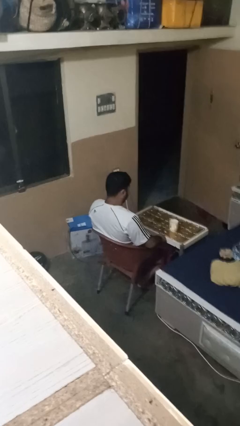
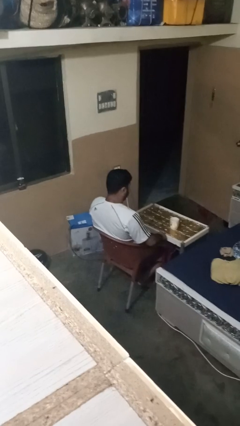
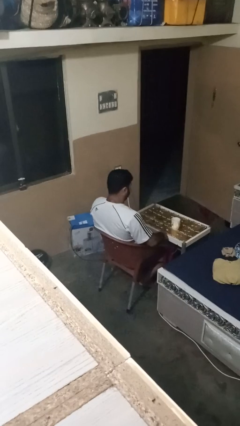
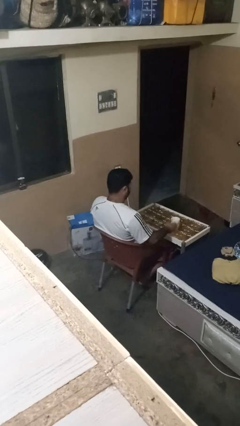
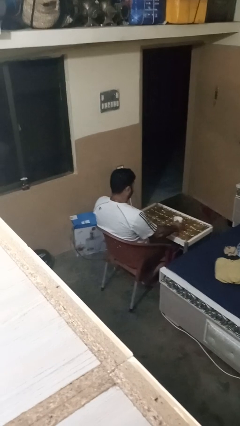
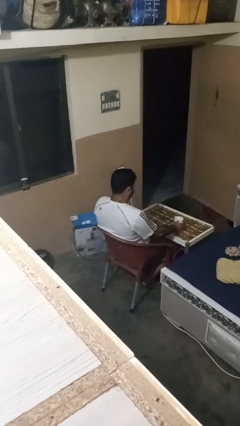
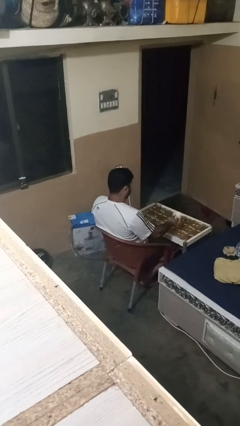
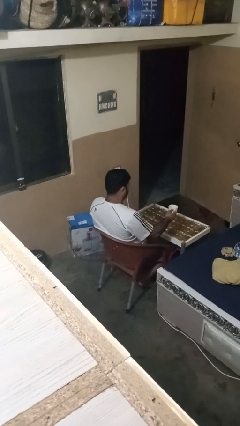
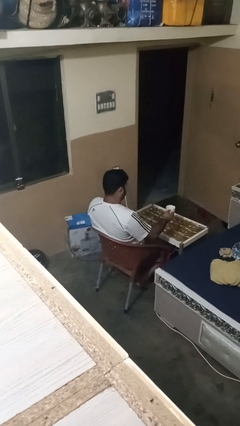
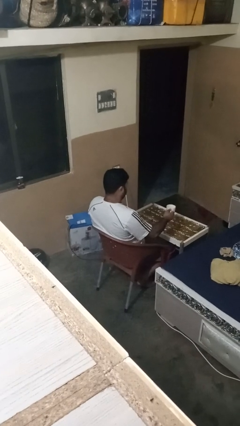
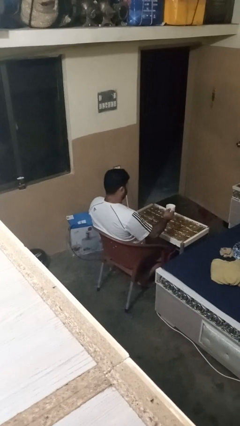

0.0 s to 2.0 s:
person picks up object from table

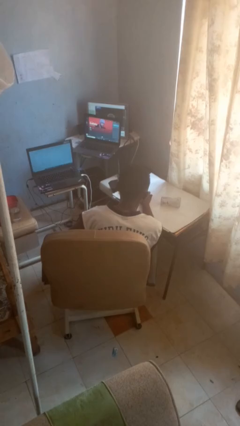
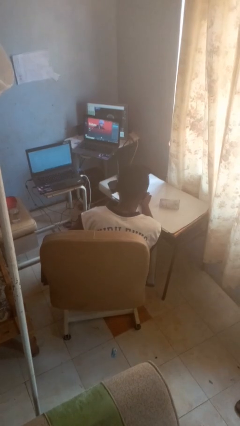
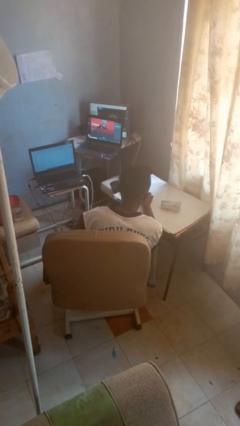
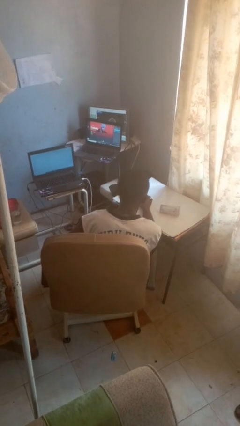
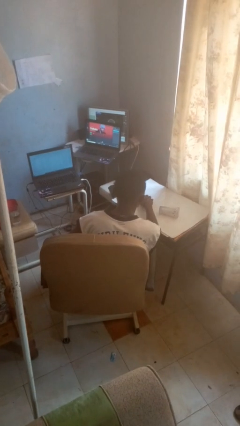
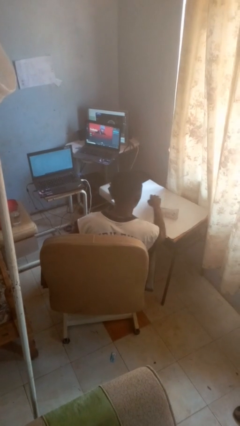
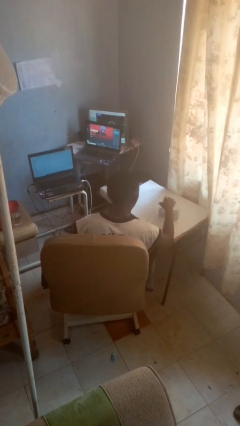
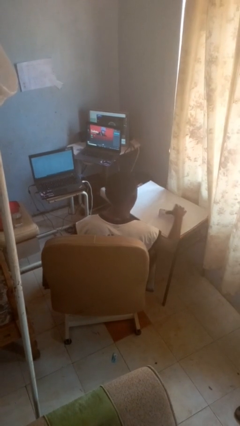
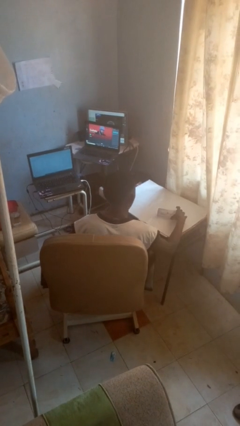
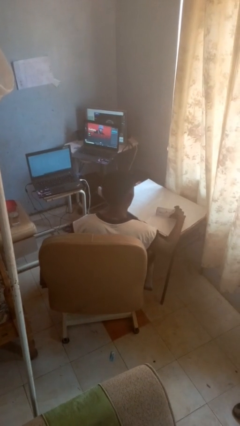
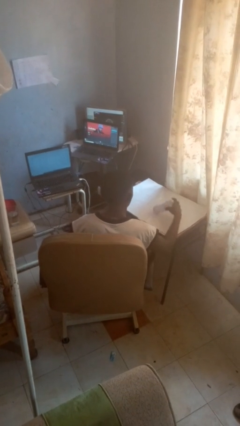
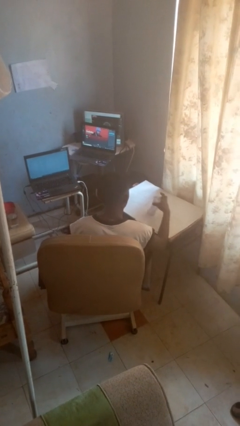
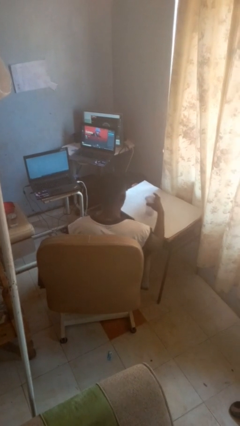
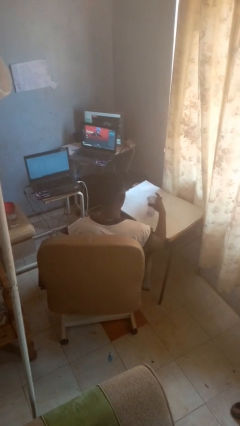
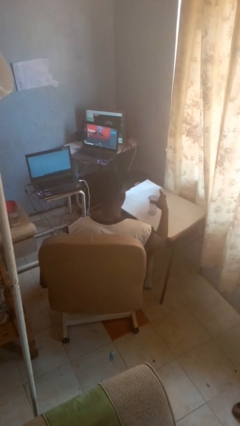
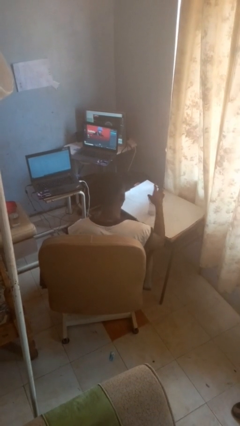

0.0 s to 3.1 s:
person sets upright glass

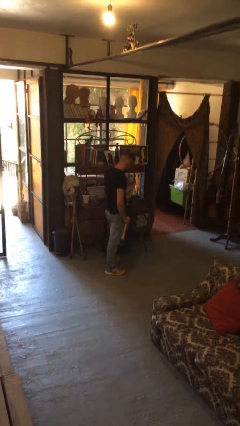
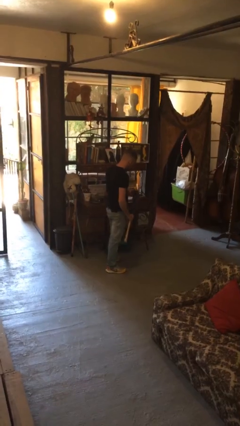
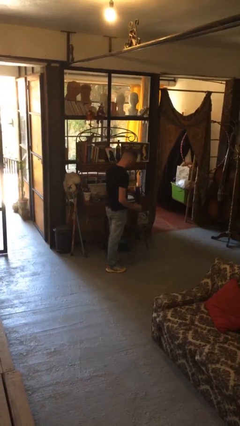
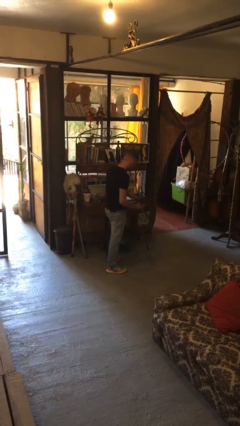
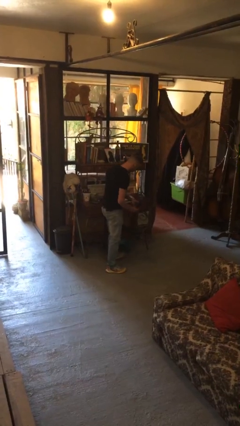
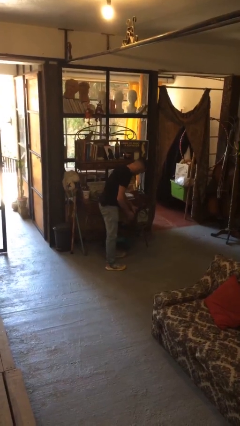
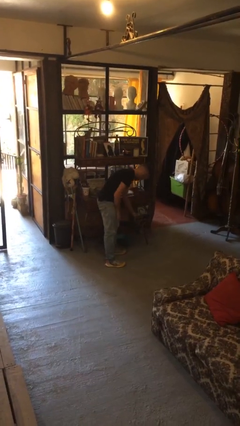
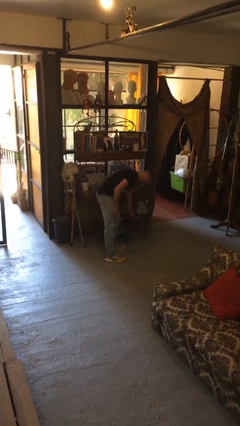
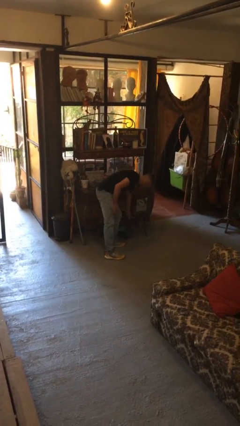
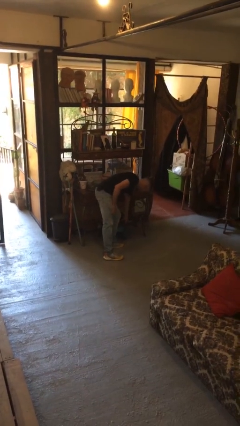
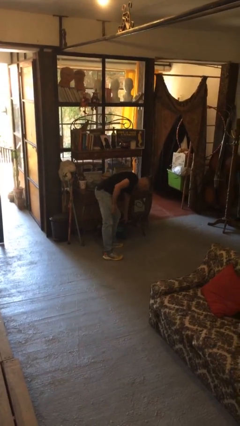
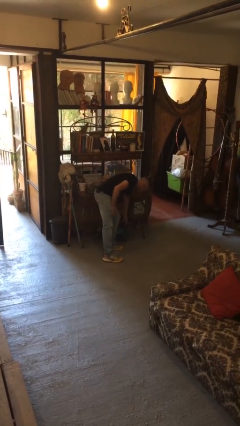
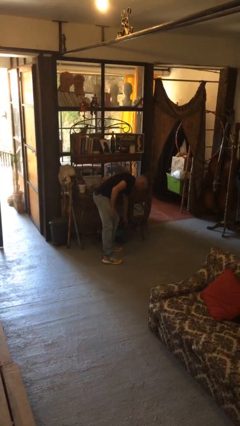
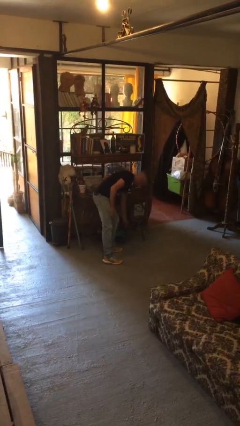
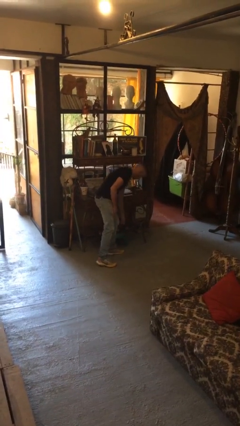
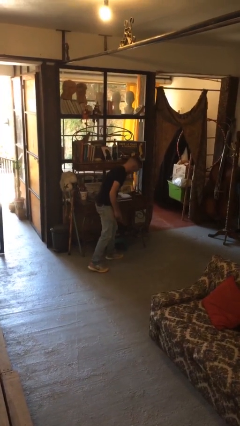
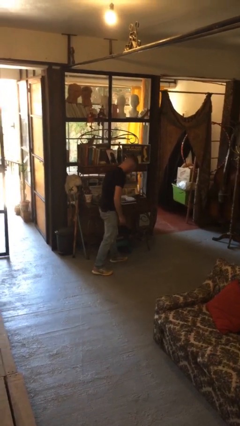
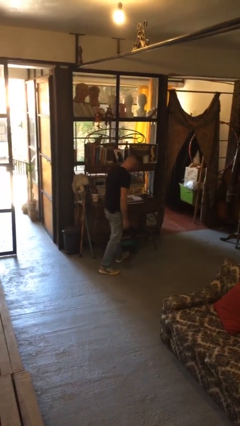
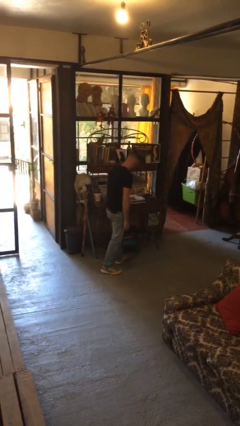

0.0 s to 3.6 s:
person puts down object into cabinet

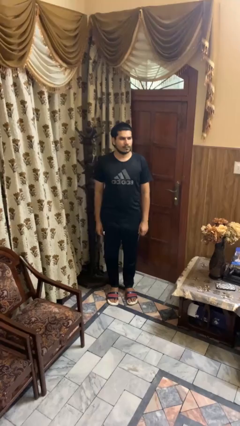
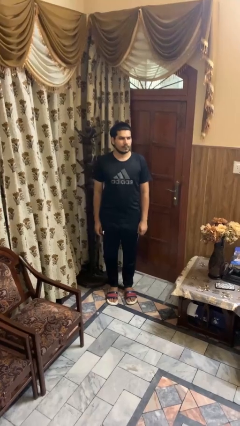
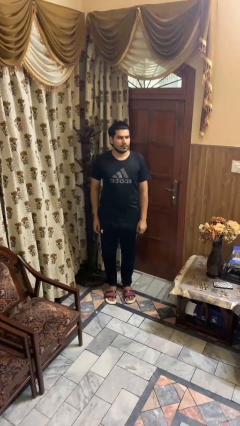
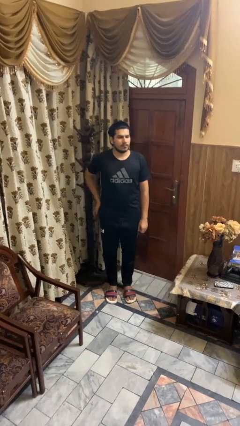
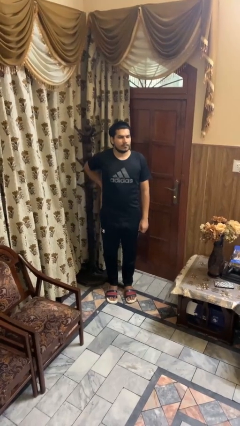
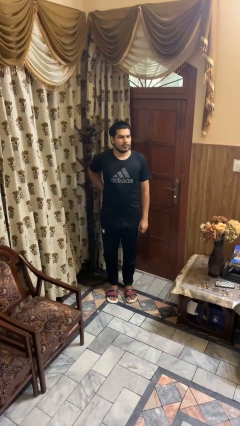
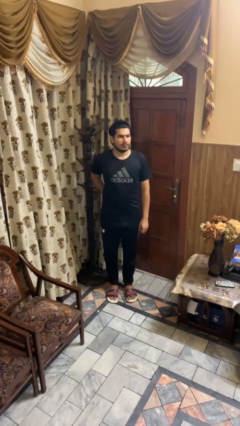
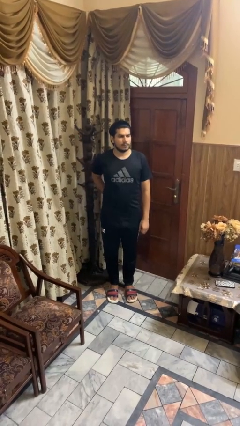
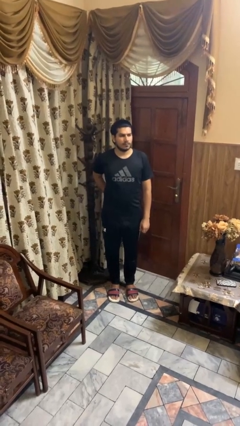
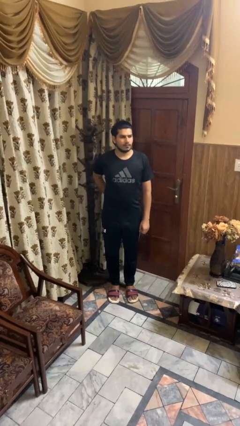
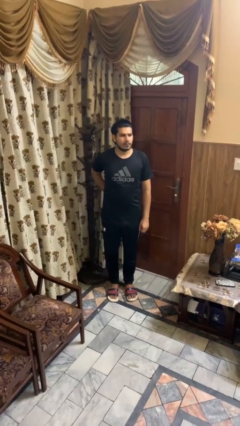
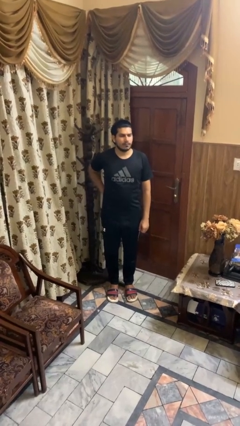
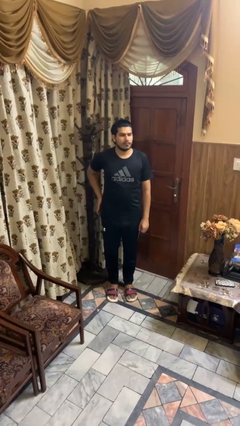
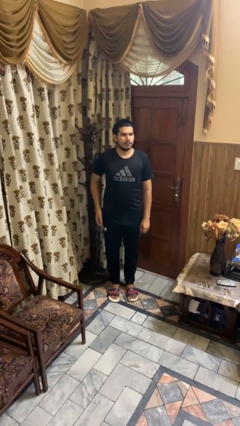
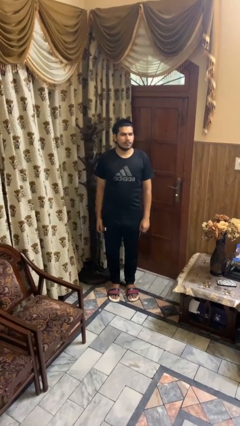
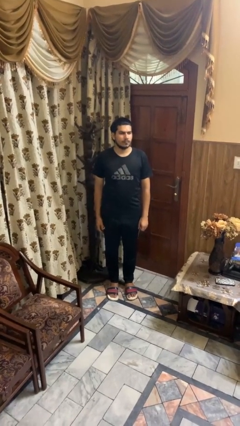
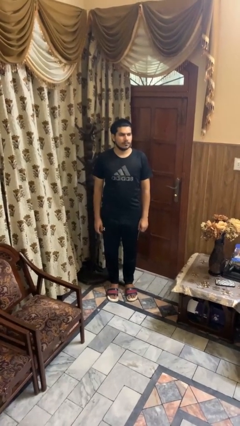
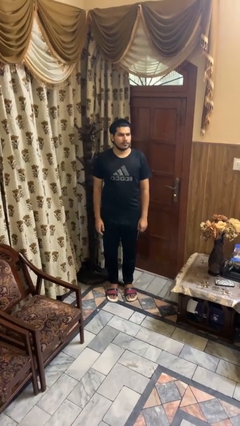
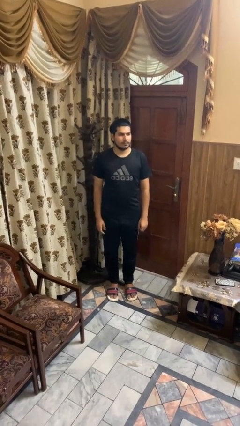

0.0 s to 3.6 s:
person puts hands in back pockets

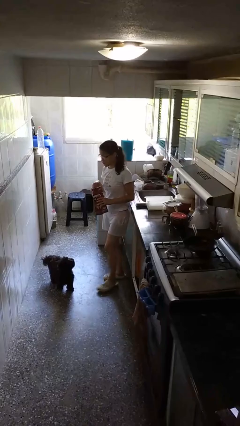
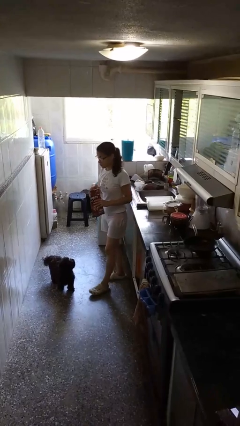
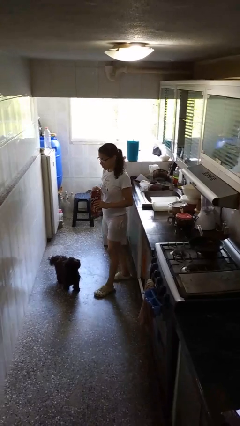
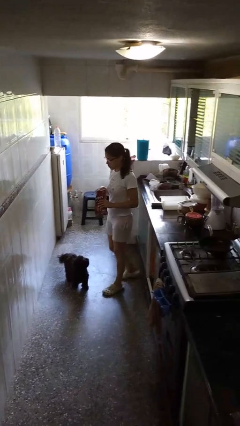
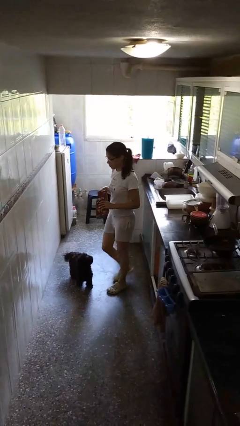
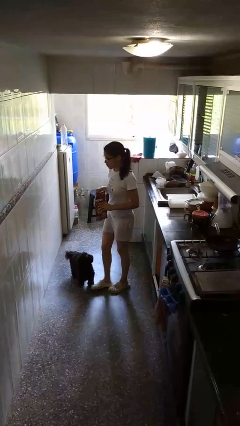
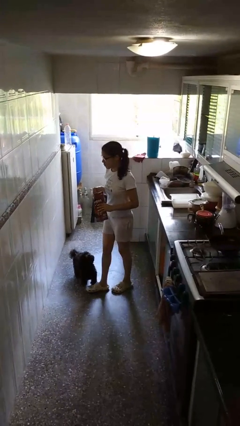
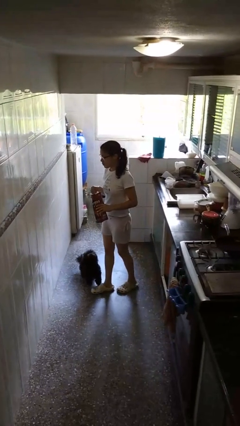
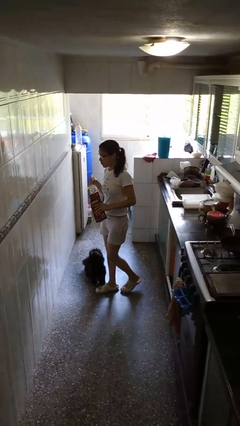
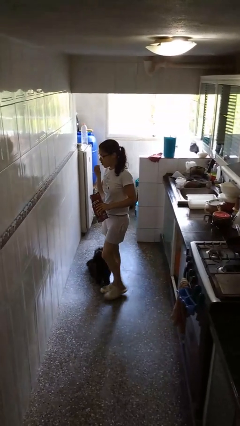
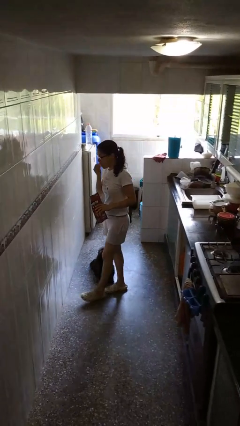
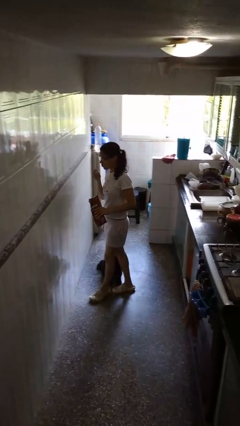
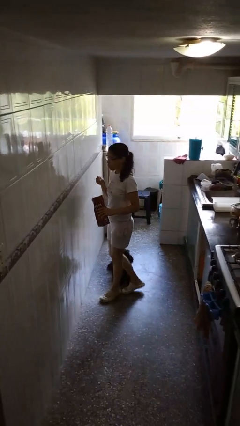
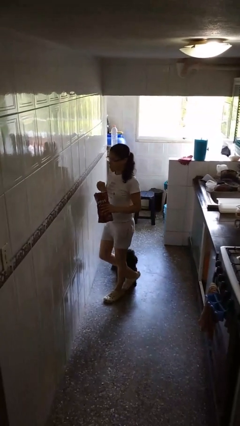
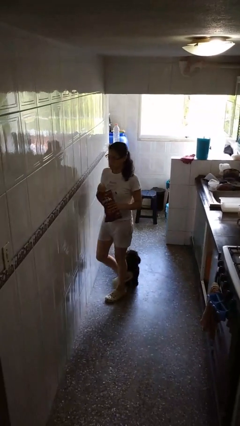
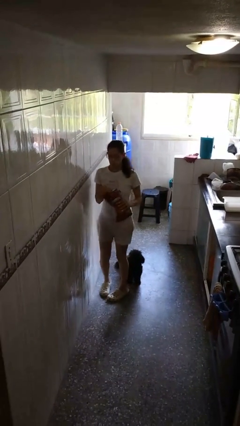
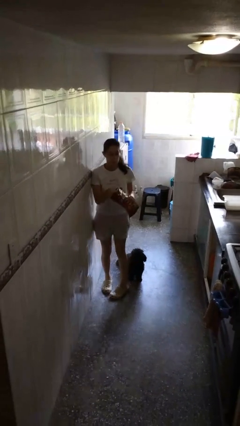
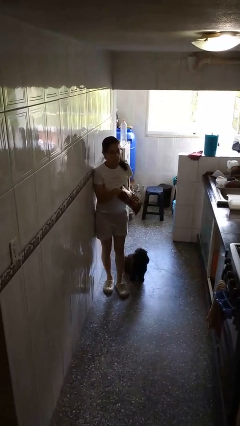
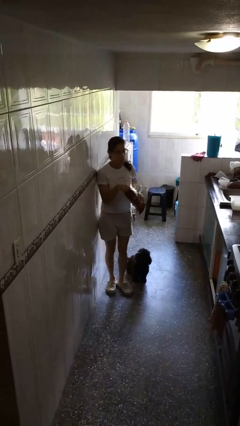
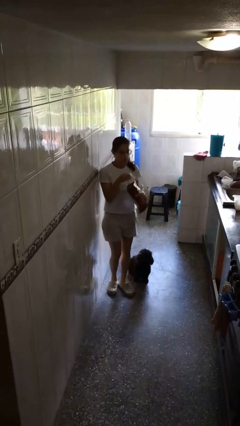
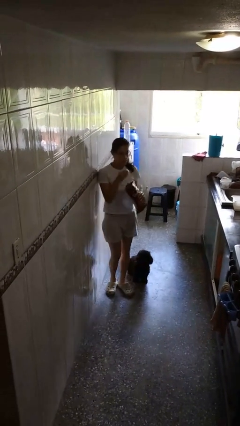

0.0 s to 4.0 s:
person eats snack from bag

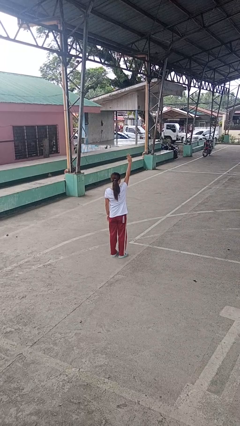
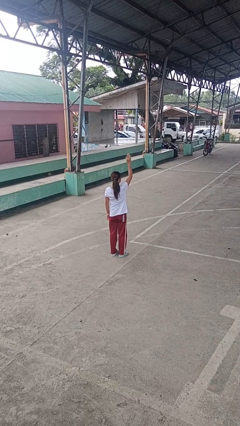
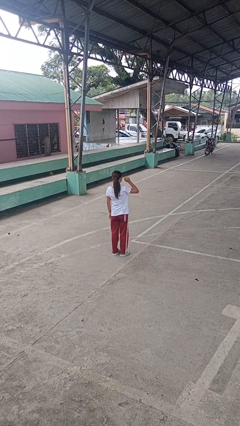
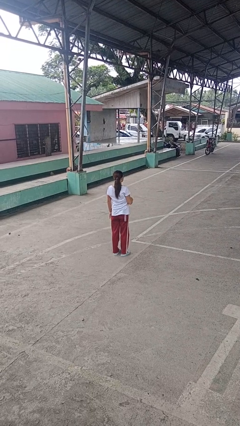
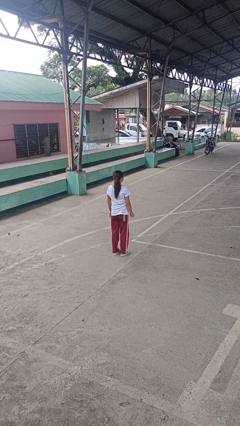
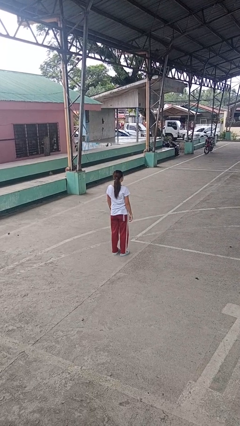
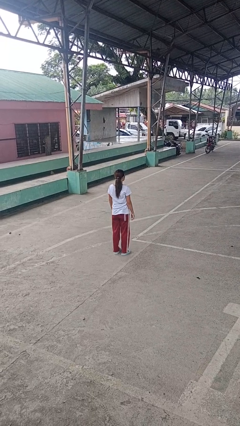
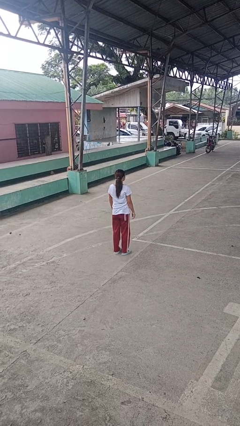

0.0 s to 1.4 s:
person gestures lower hand
